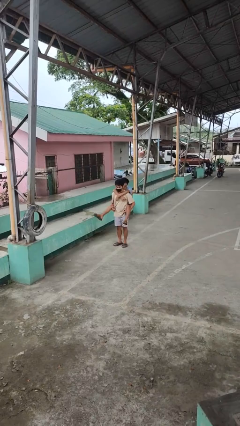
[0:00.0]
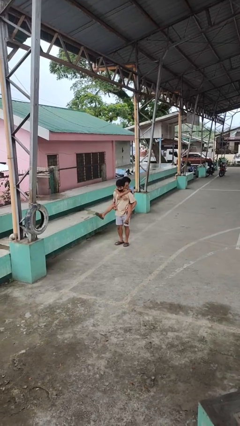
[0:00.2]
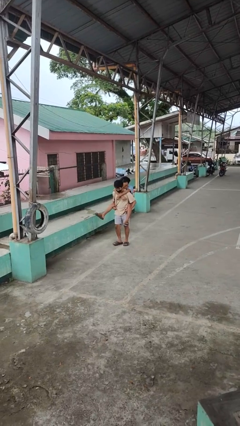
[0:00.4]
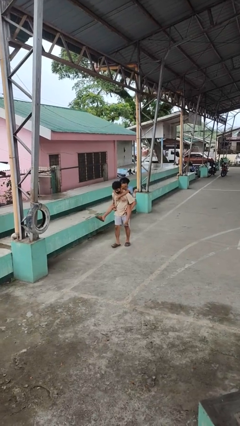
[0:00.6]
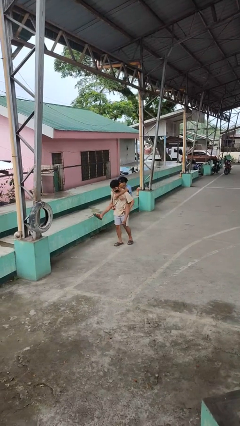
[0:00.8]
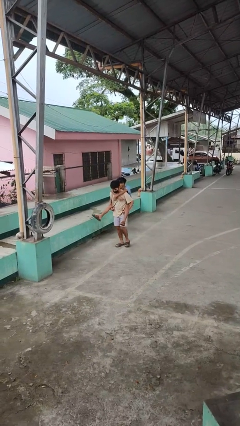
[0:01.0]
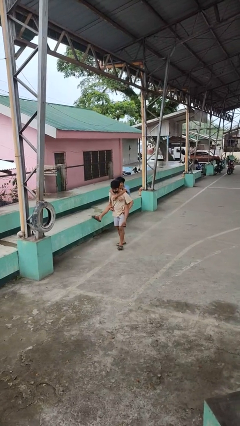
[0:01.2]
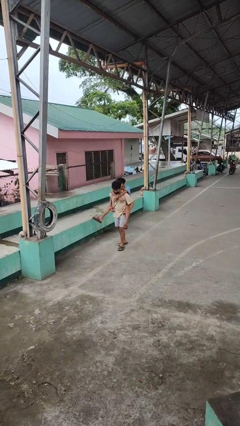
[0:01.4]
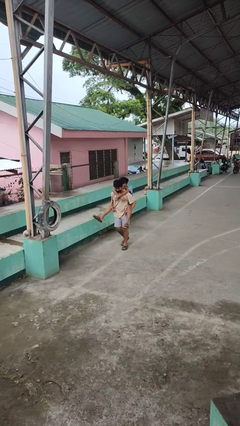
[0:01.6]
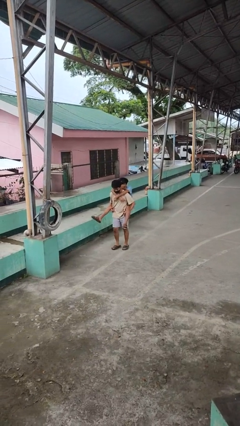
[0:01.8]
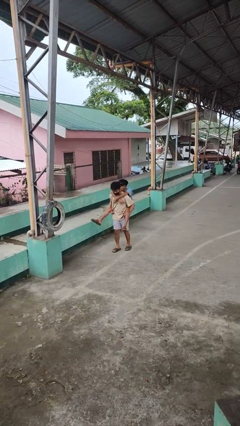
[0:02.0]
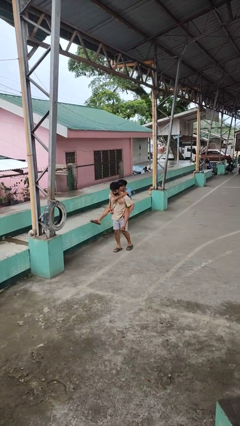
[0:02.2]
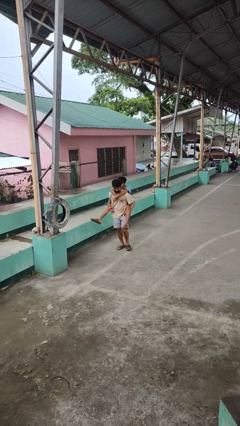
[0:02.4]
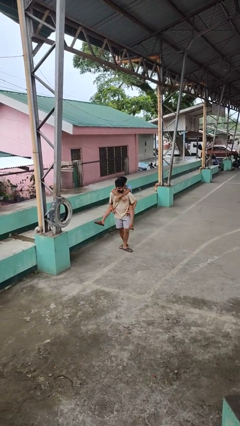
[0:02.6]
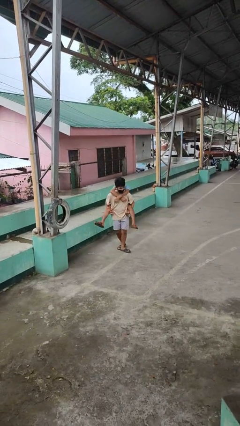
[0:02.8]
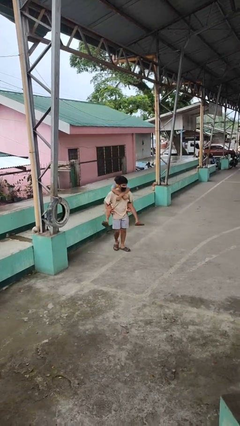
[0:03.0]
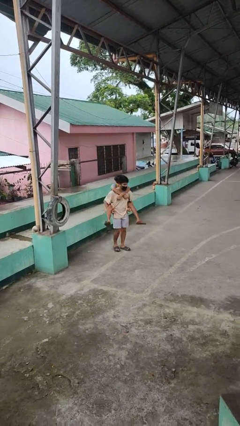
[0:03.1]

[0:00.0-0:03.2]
person carries person on back

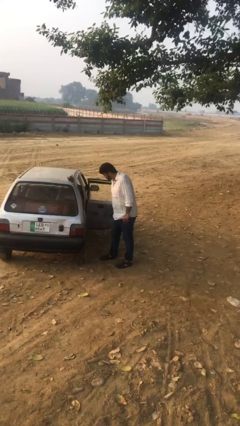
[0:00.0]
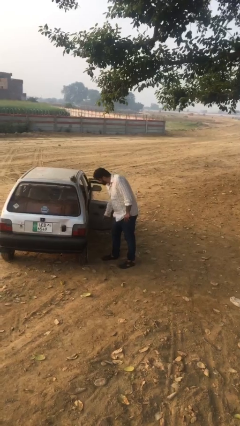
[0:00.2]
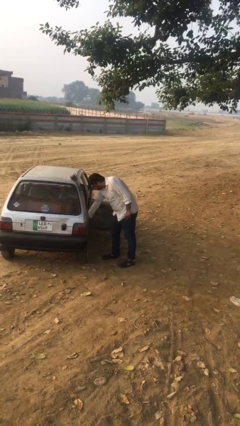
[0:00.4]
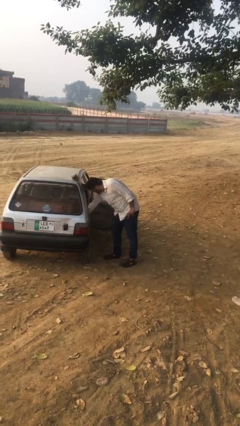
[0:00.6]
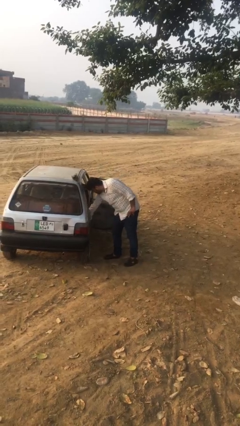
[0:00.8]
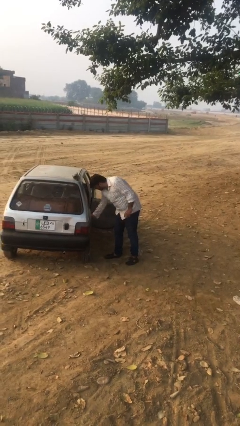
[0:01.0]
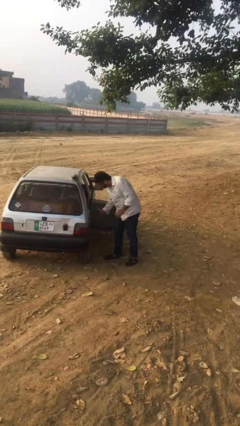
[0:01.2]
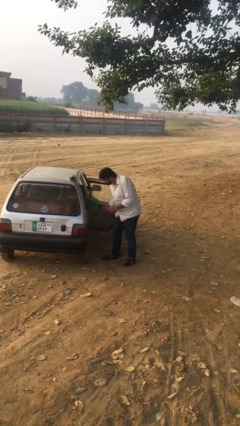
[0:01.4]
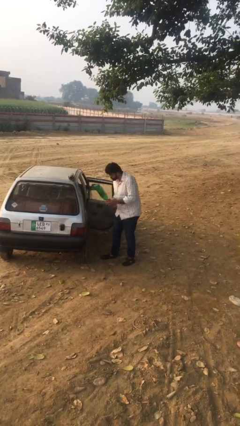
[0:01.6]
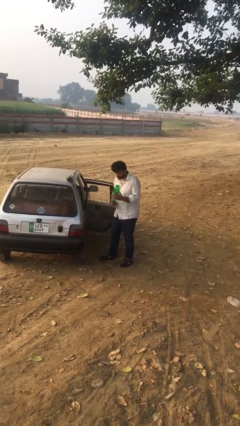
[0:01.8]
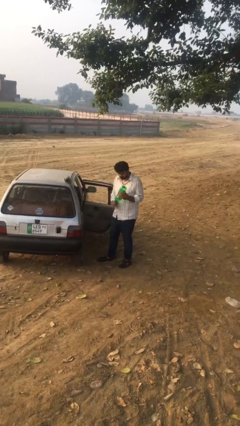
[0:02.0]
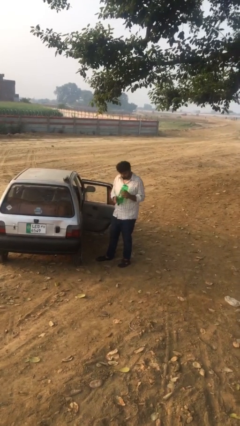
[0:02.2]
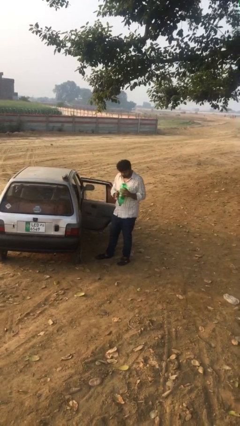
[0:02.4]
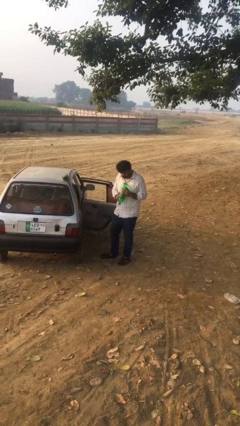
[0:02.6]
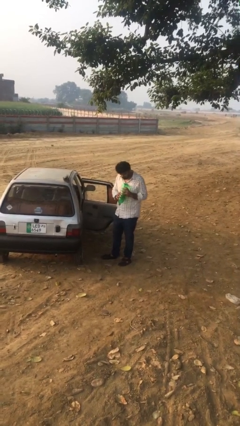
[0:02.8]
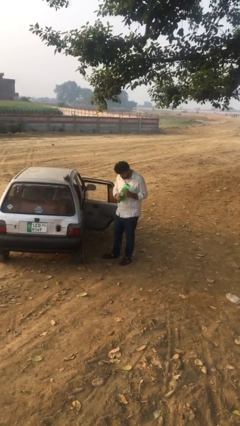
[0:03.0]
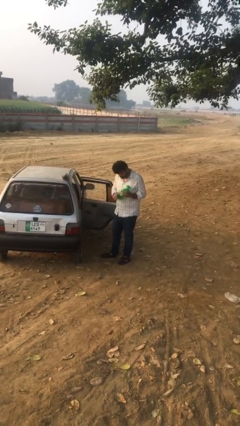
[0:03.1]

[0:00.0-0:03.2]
person unloads car

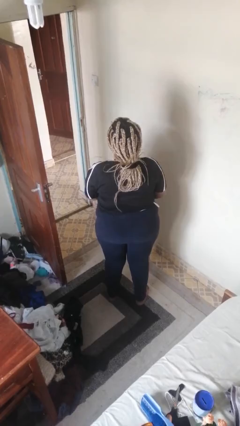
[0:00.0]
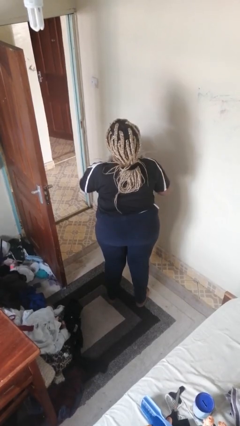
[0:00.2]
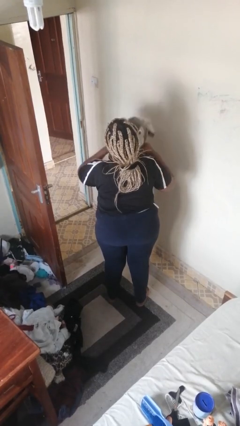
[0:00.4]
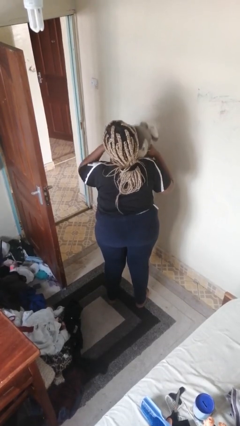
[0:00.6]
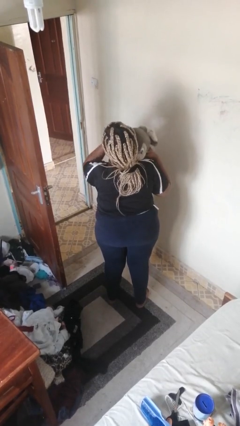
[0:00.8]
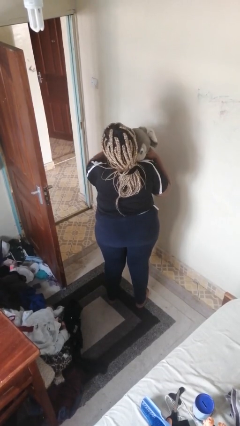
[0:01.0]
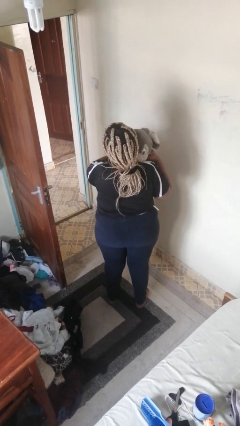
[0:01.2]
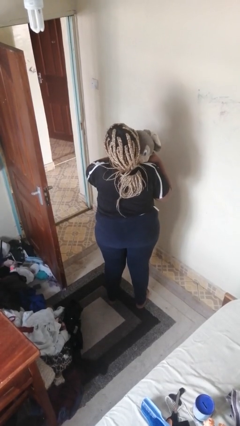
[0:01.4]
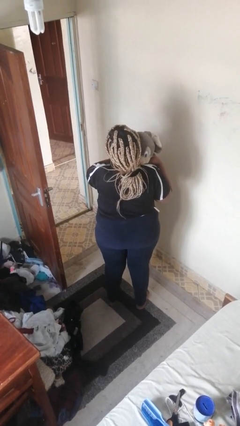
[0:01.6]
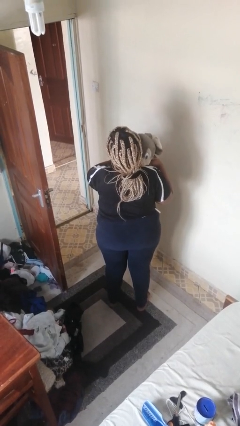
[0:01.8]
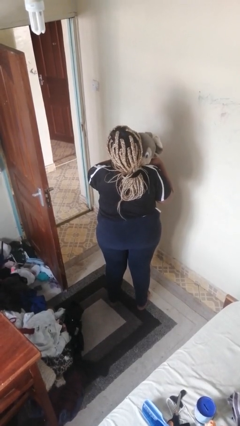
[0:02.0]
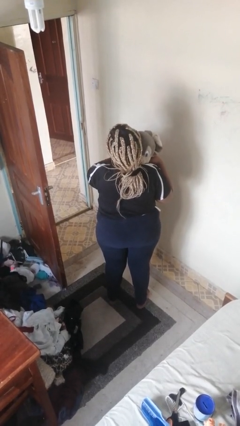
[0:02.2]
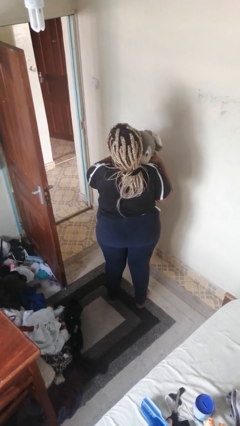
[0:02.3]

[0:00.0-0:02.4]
person hugs stuffed animal

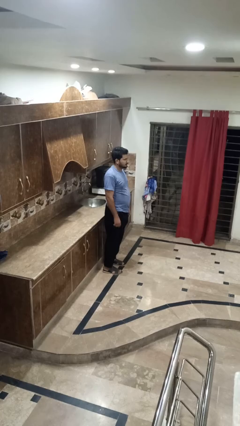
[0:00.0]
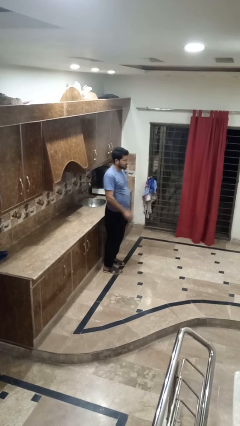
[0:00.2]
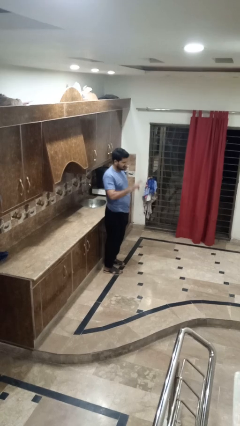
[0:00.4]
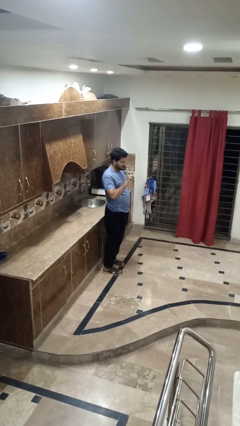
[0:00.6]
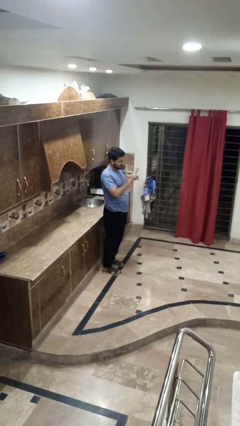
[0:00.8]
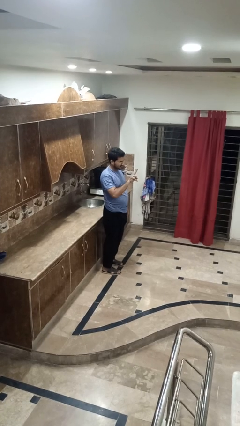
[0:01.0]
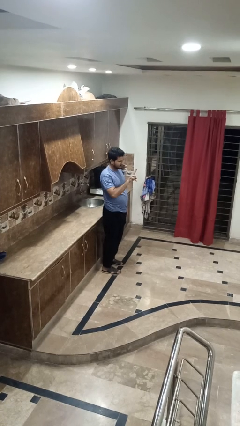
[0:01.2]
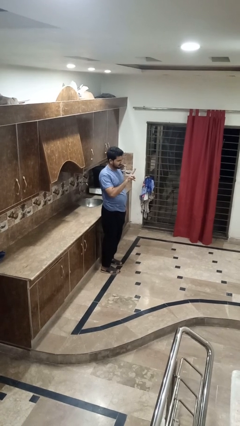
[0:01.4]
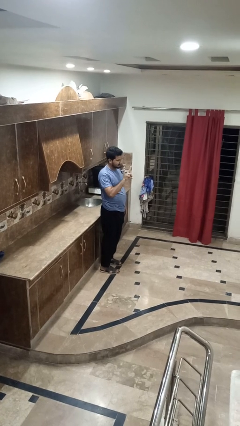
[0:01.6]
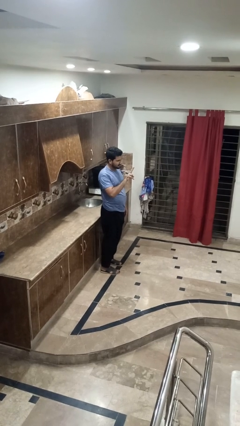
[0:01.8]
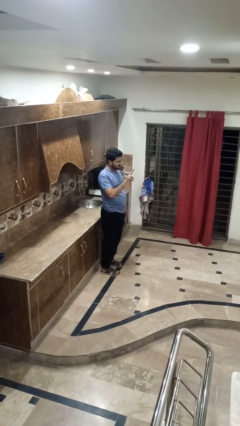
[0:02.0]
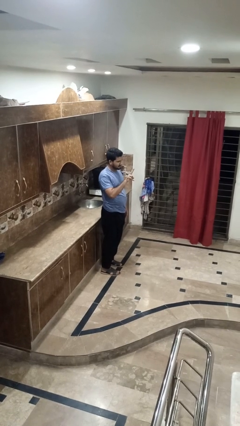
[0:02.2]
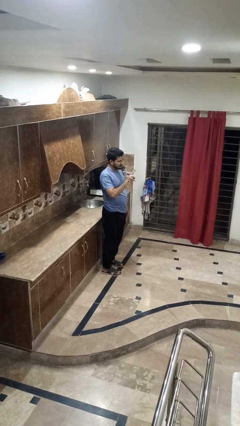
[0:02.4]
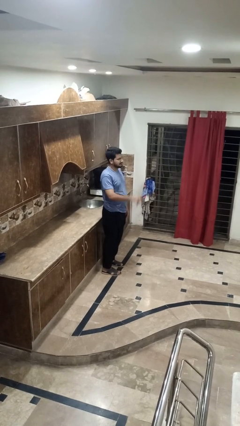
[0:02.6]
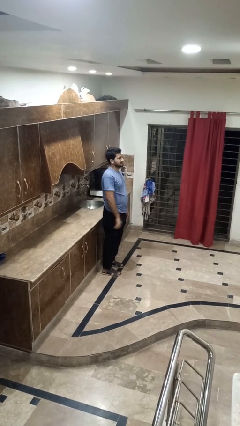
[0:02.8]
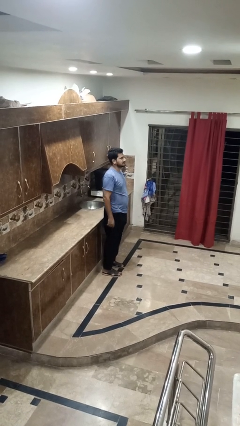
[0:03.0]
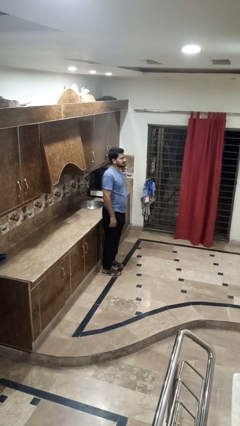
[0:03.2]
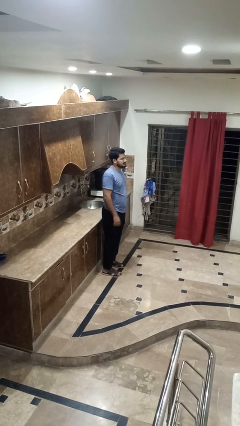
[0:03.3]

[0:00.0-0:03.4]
person gestures peace

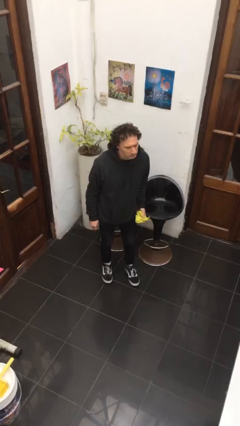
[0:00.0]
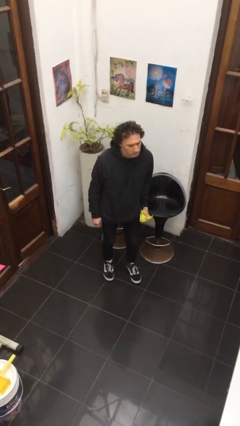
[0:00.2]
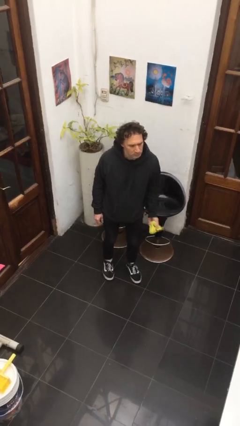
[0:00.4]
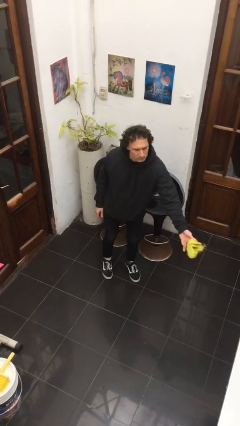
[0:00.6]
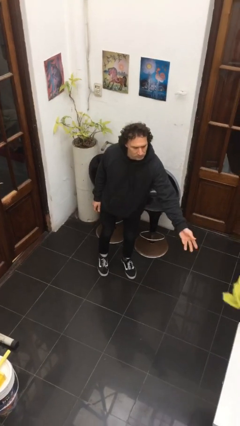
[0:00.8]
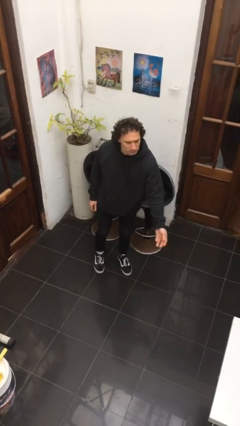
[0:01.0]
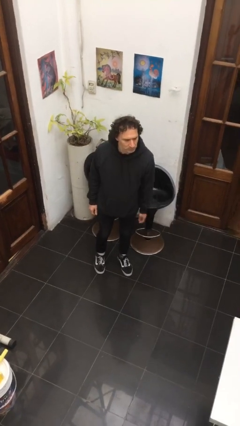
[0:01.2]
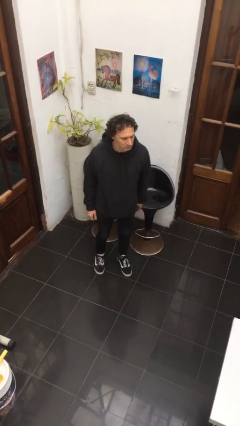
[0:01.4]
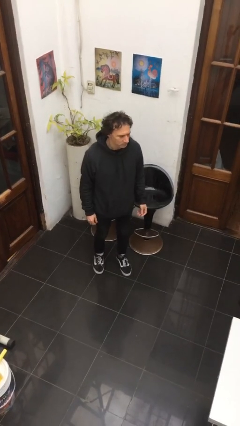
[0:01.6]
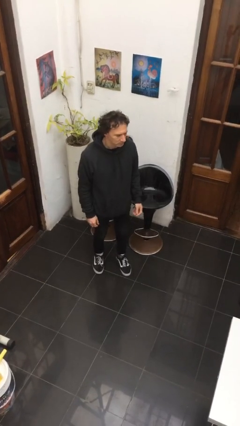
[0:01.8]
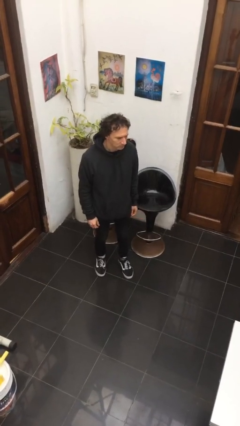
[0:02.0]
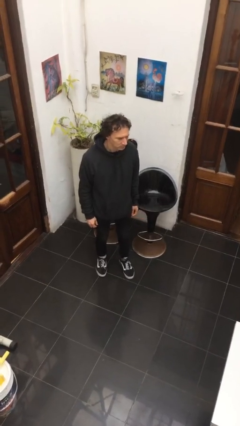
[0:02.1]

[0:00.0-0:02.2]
person throws object on table

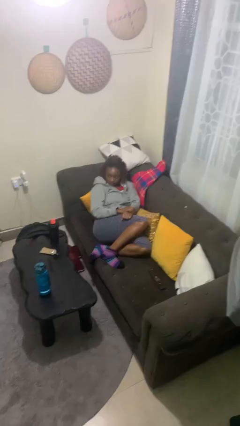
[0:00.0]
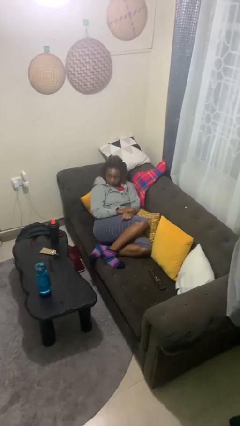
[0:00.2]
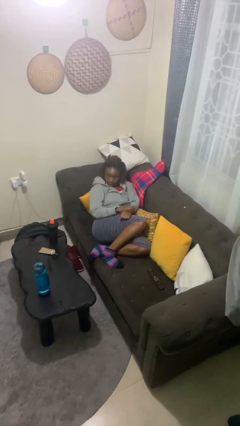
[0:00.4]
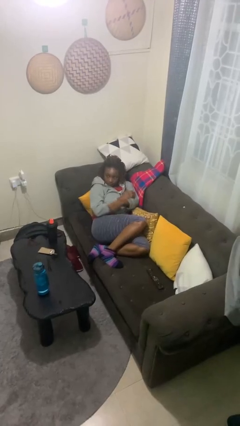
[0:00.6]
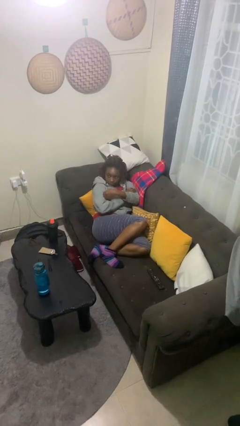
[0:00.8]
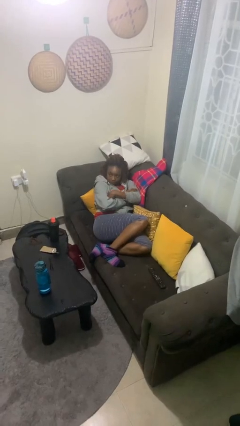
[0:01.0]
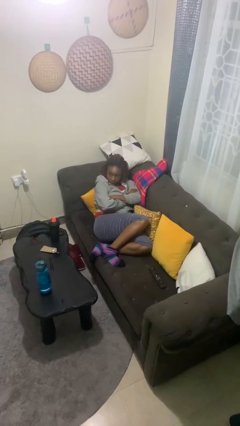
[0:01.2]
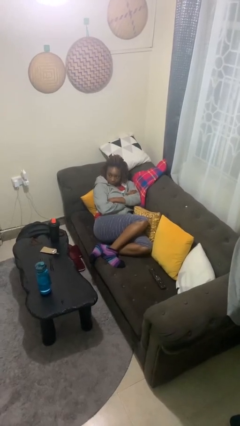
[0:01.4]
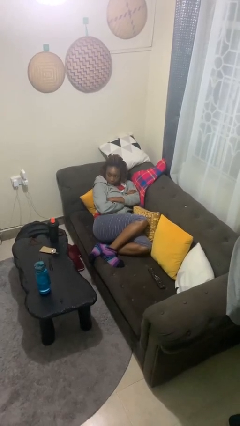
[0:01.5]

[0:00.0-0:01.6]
person crosses arms

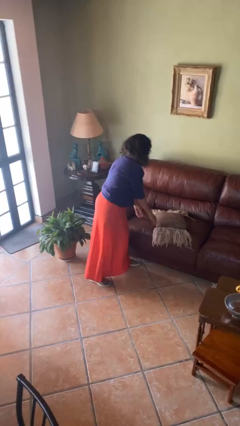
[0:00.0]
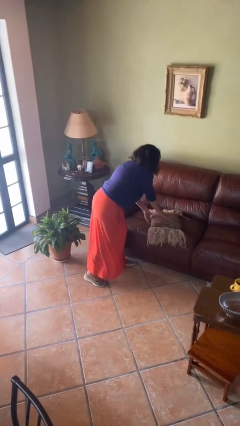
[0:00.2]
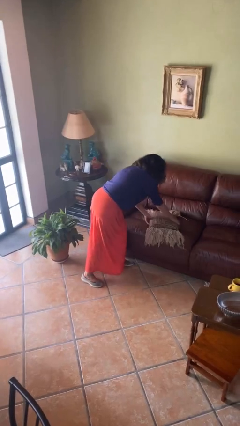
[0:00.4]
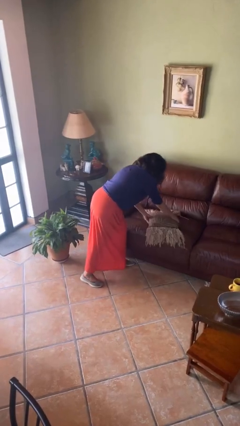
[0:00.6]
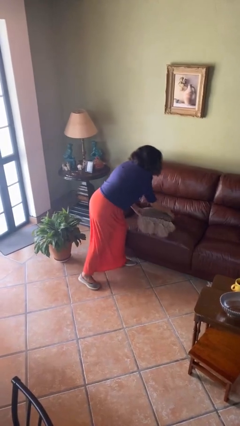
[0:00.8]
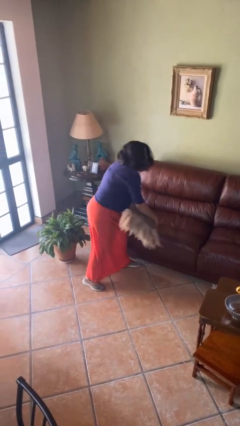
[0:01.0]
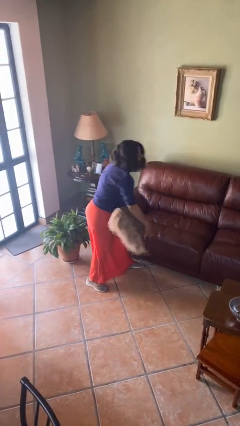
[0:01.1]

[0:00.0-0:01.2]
person picks up object from couch
